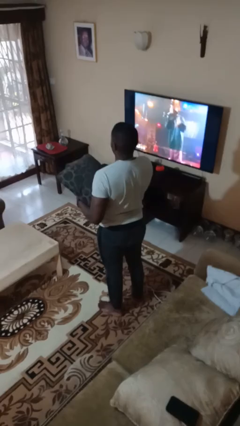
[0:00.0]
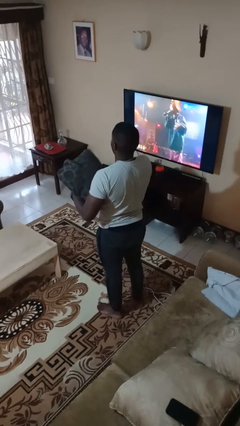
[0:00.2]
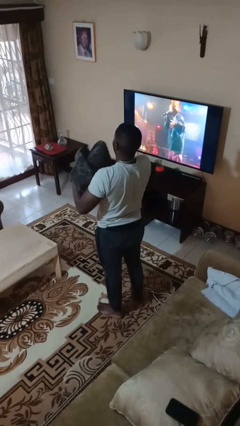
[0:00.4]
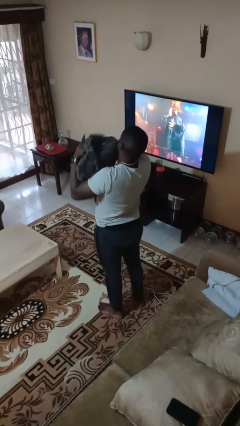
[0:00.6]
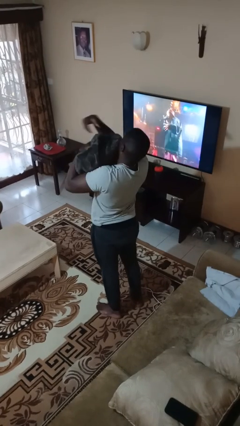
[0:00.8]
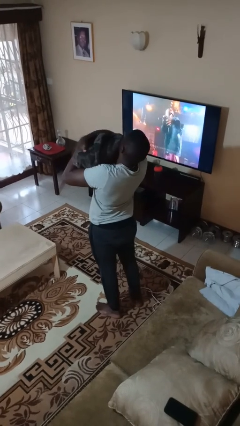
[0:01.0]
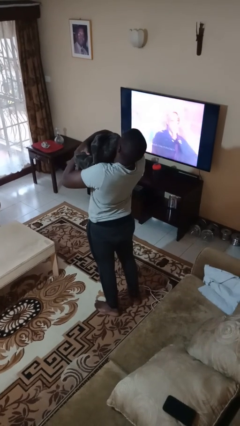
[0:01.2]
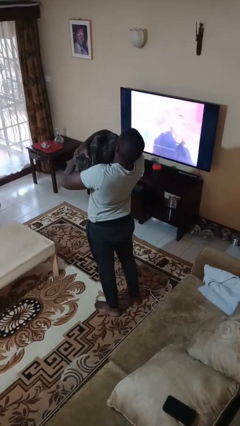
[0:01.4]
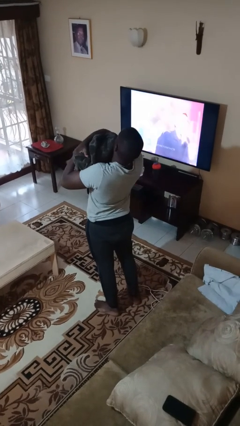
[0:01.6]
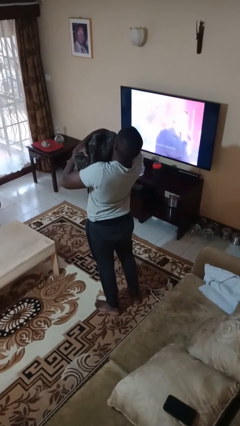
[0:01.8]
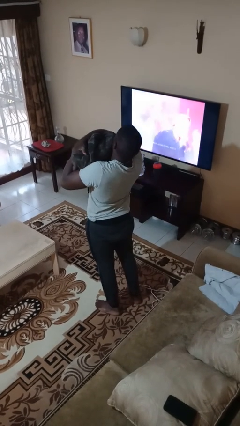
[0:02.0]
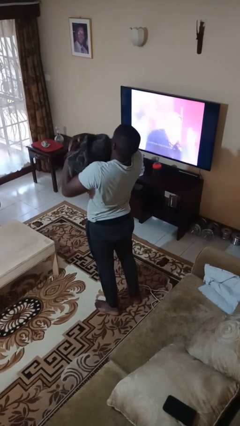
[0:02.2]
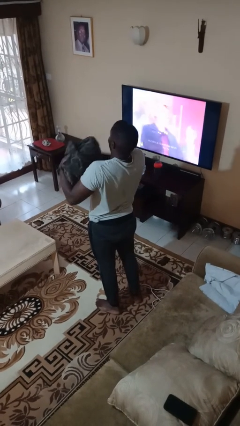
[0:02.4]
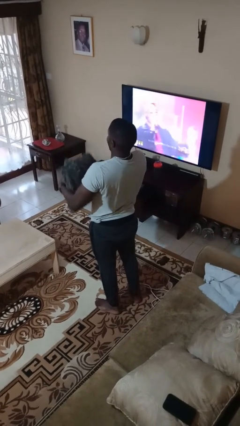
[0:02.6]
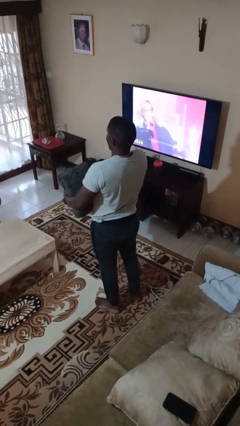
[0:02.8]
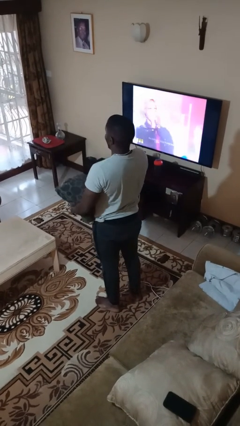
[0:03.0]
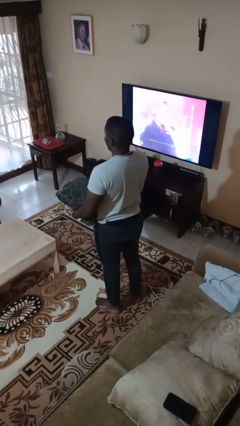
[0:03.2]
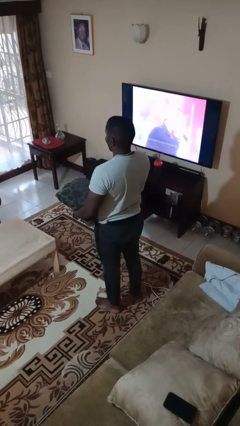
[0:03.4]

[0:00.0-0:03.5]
person hugs stuffed animal

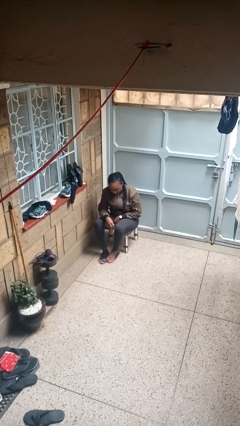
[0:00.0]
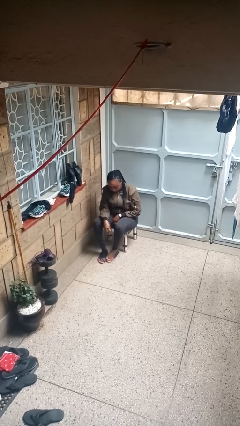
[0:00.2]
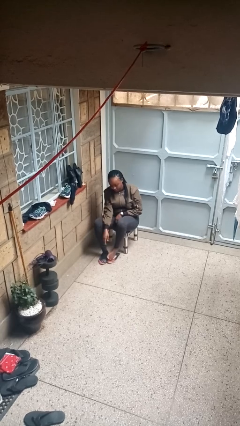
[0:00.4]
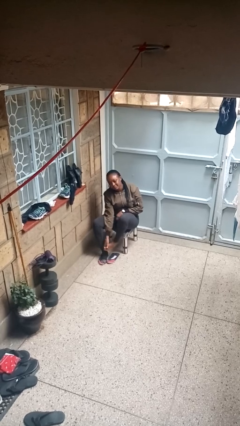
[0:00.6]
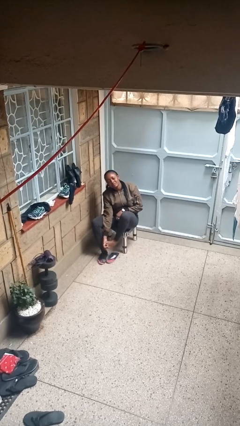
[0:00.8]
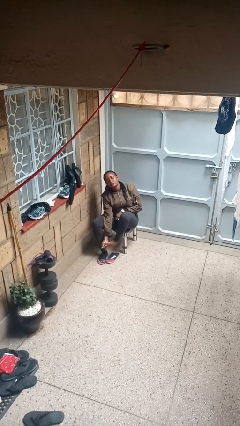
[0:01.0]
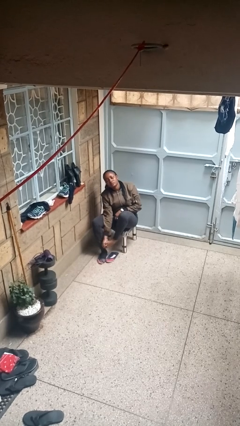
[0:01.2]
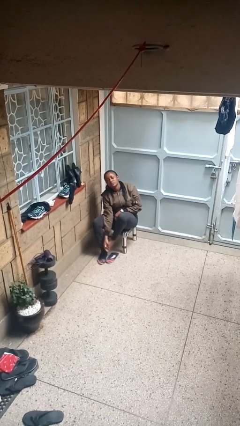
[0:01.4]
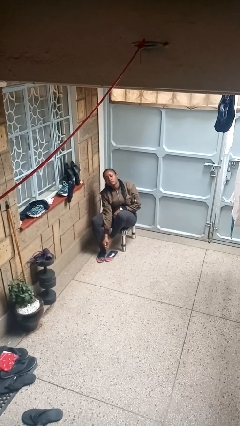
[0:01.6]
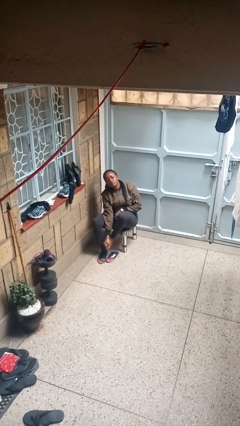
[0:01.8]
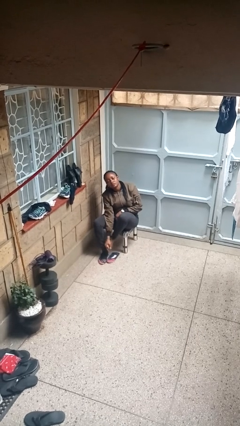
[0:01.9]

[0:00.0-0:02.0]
person rubs foot

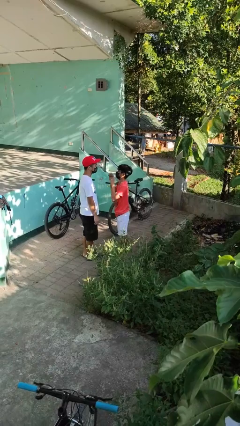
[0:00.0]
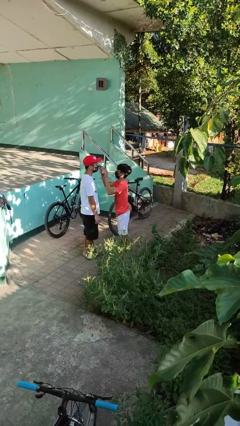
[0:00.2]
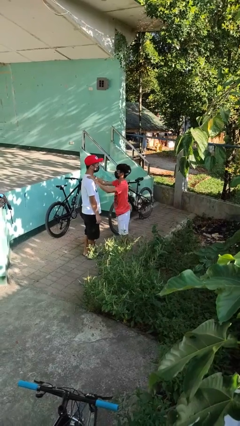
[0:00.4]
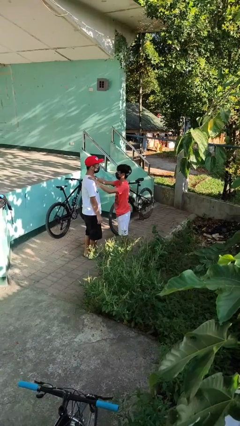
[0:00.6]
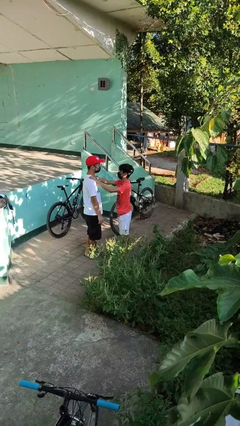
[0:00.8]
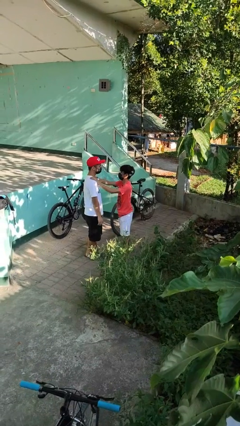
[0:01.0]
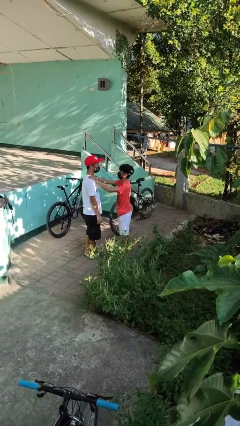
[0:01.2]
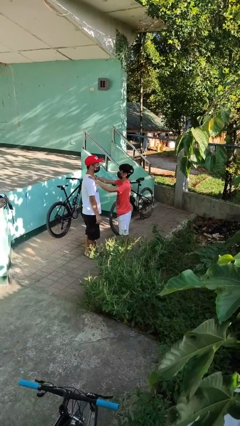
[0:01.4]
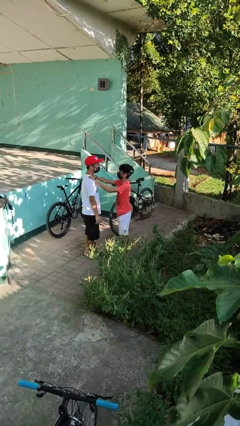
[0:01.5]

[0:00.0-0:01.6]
person grabs person by shoulder

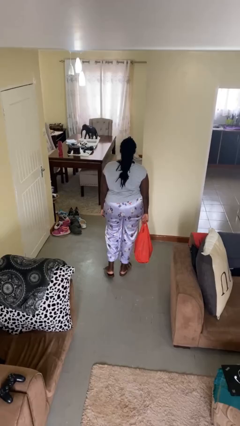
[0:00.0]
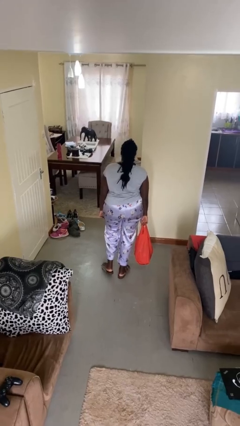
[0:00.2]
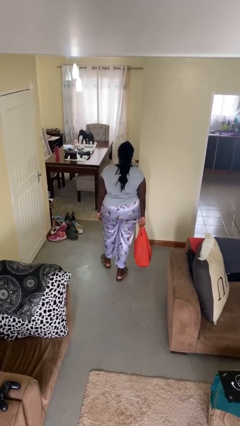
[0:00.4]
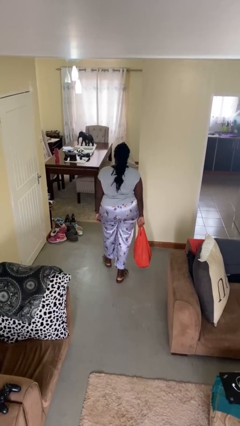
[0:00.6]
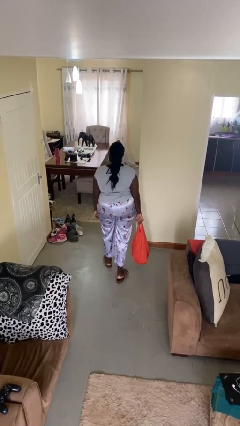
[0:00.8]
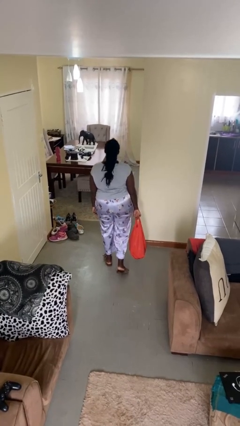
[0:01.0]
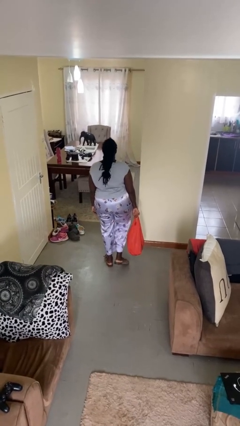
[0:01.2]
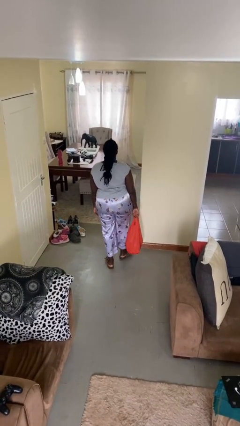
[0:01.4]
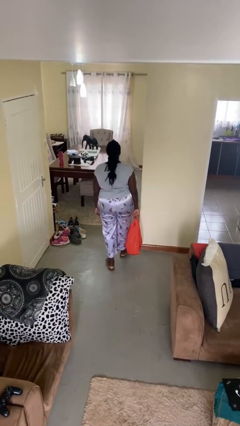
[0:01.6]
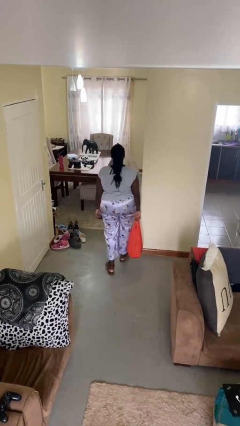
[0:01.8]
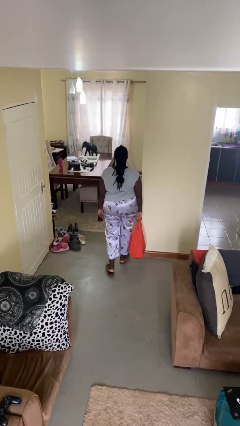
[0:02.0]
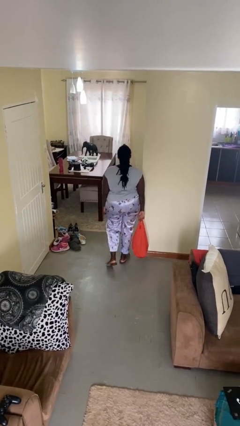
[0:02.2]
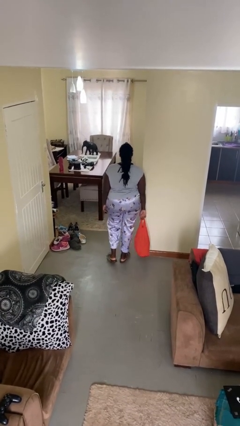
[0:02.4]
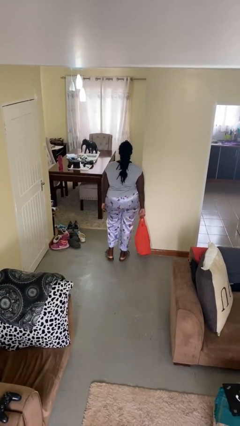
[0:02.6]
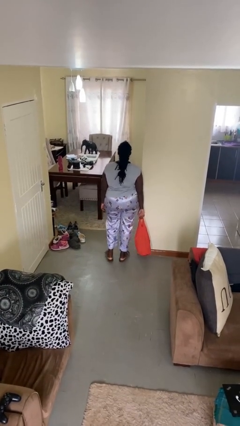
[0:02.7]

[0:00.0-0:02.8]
person carries groceries

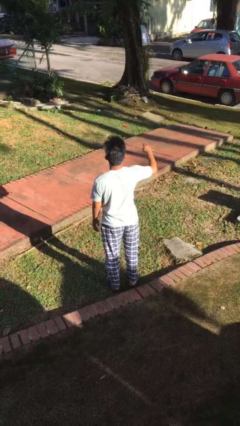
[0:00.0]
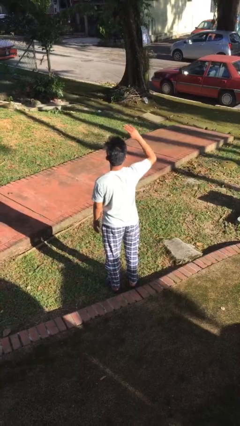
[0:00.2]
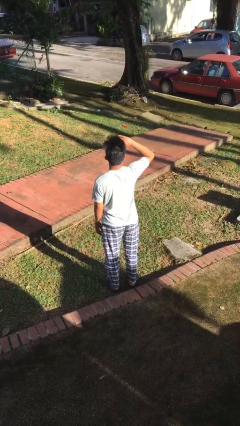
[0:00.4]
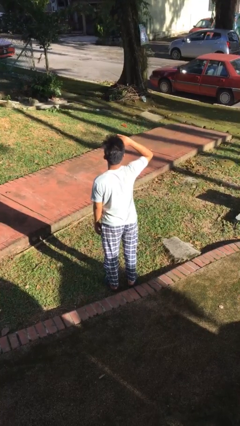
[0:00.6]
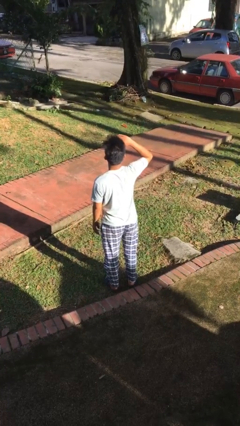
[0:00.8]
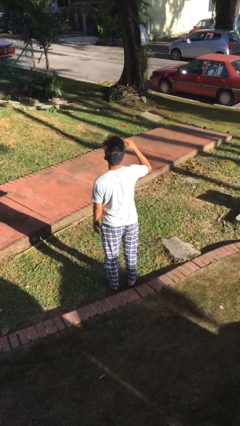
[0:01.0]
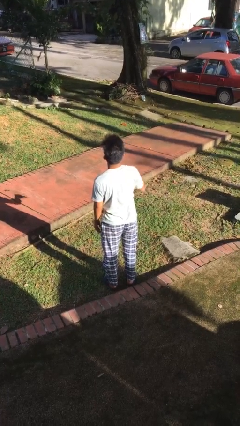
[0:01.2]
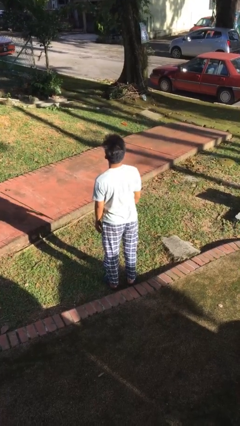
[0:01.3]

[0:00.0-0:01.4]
person salutes

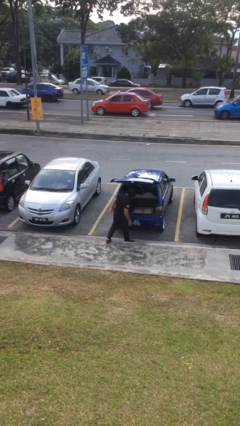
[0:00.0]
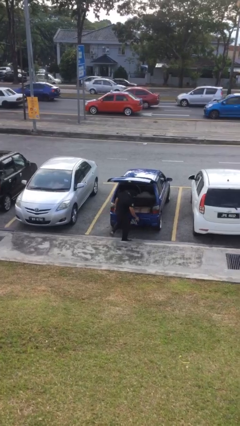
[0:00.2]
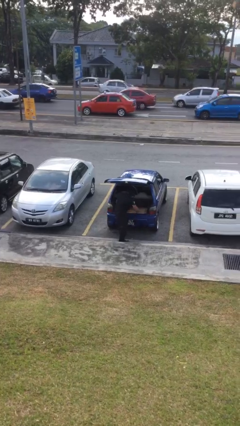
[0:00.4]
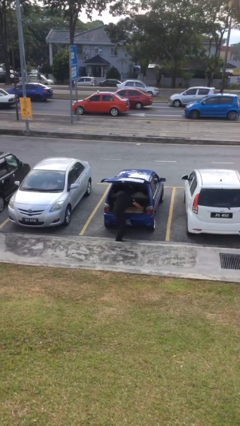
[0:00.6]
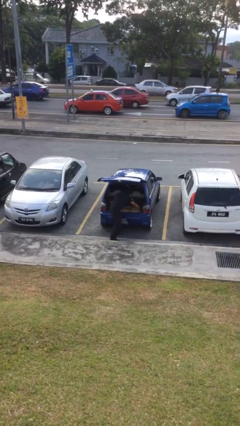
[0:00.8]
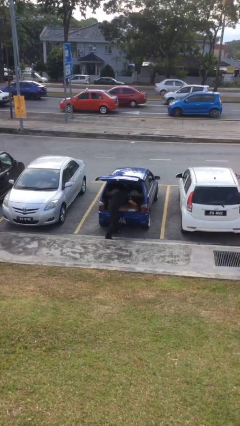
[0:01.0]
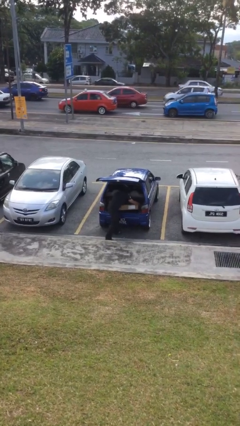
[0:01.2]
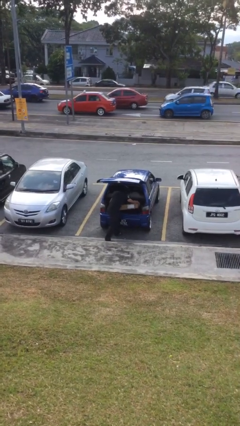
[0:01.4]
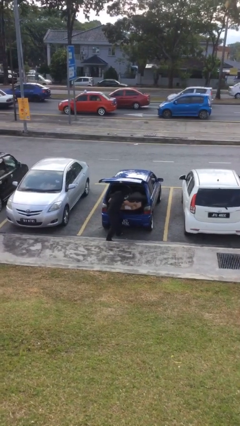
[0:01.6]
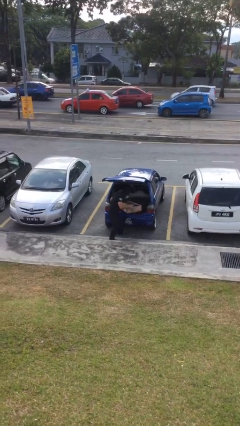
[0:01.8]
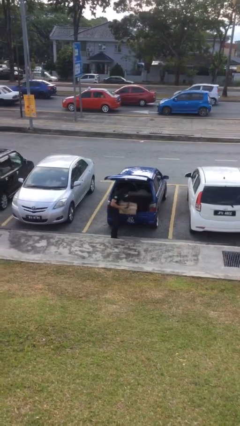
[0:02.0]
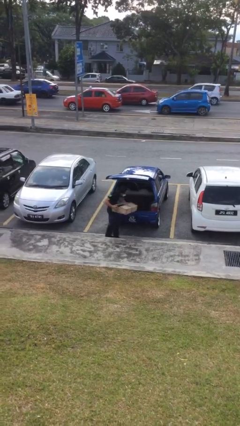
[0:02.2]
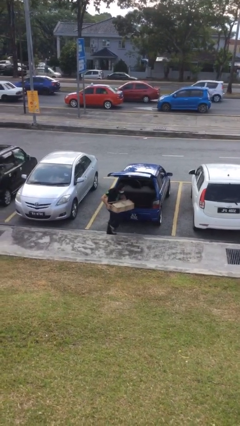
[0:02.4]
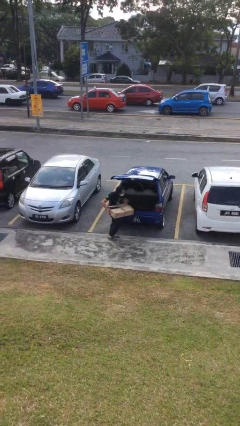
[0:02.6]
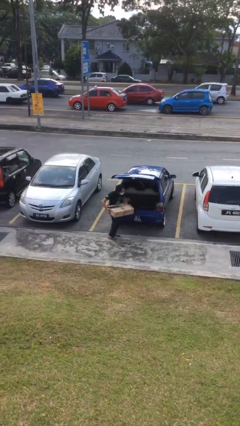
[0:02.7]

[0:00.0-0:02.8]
person unloads car

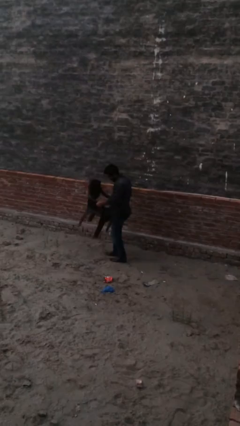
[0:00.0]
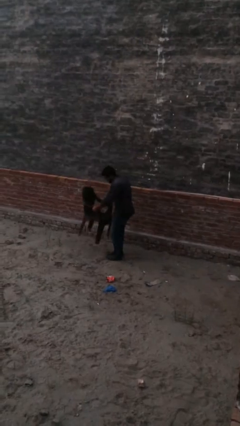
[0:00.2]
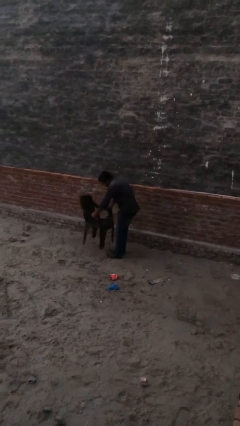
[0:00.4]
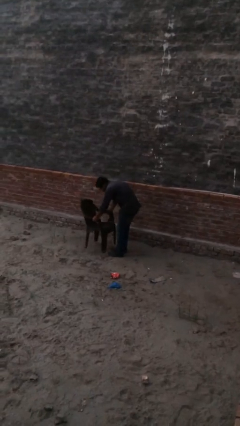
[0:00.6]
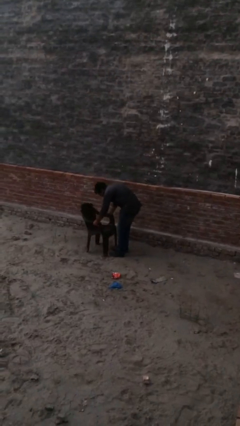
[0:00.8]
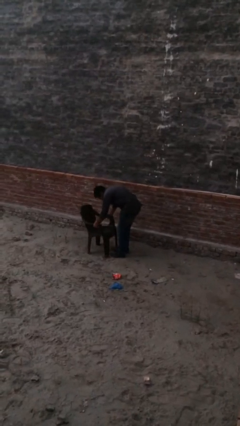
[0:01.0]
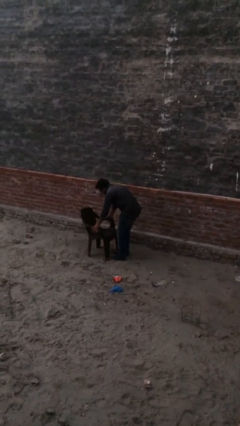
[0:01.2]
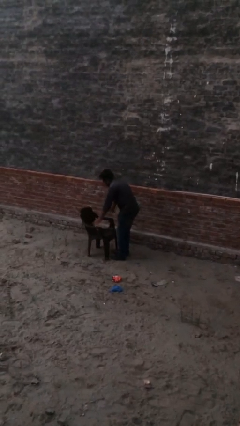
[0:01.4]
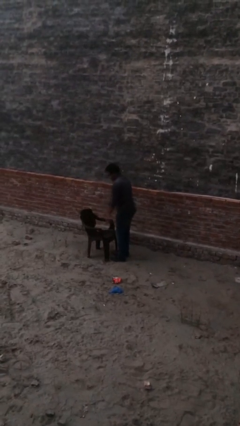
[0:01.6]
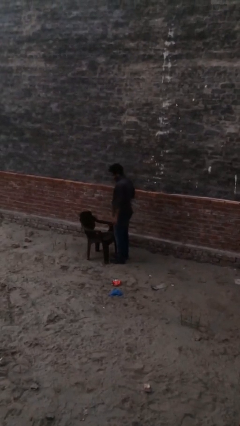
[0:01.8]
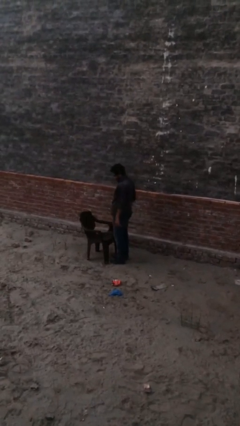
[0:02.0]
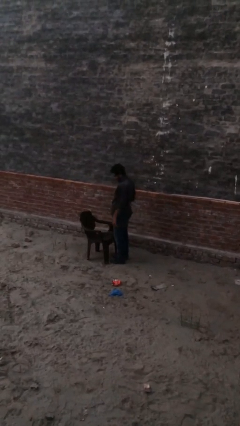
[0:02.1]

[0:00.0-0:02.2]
person puts down object on floor

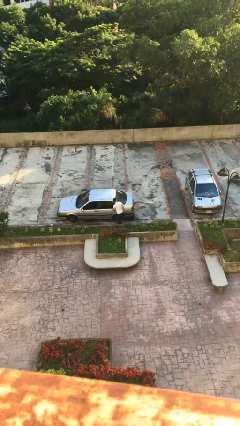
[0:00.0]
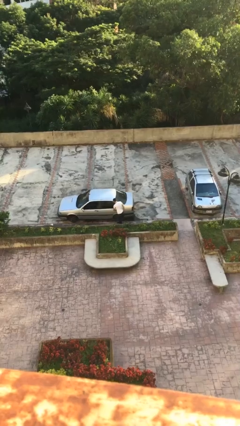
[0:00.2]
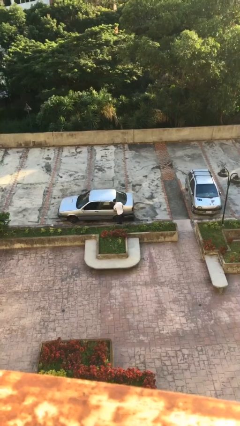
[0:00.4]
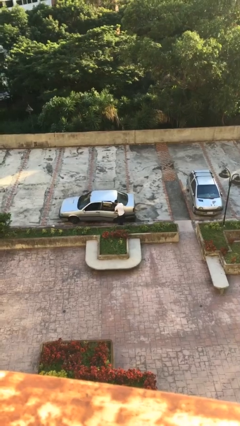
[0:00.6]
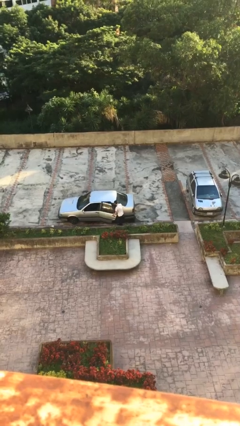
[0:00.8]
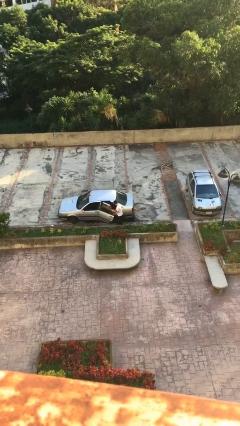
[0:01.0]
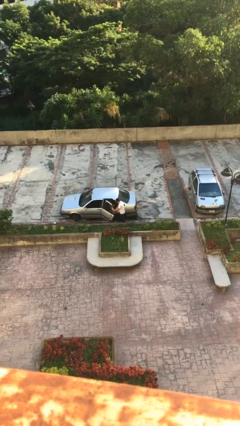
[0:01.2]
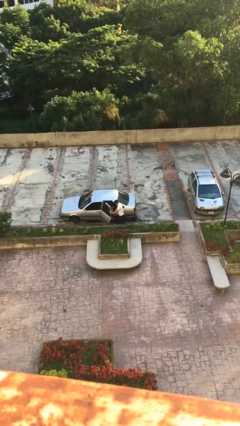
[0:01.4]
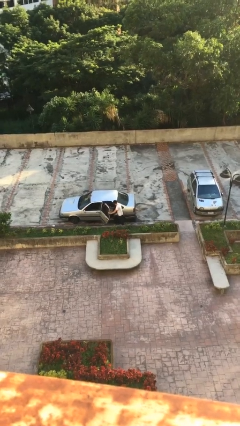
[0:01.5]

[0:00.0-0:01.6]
person opens car door
